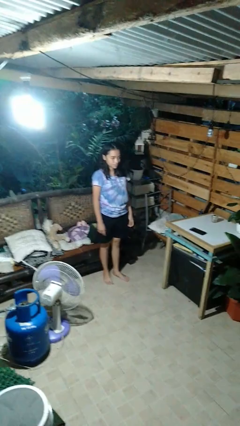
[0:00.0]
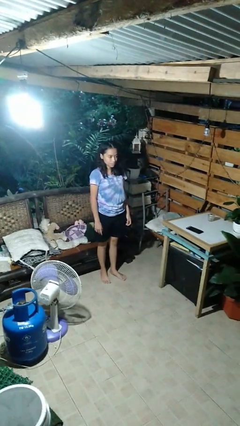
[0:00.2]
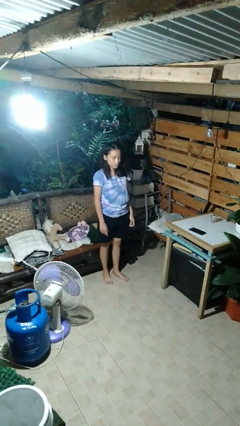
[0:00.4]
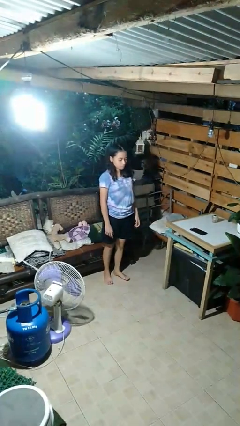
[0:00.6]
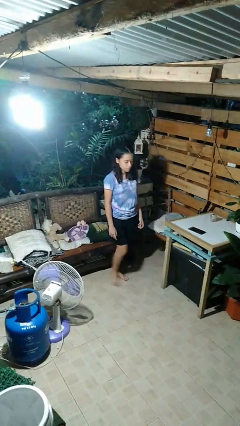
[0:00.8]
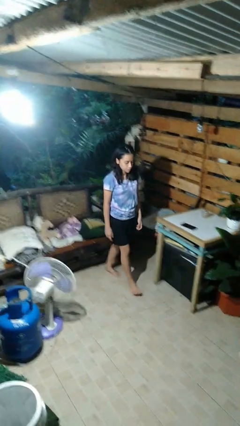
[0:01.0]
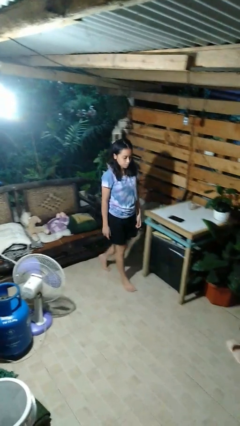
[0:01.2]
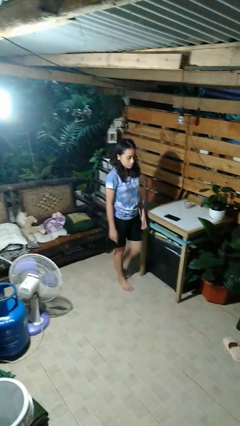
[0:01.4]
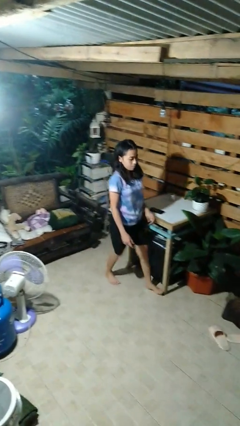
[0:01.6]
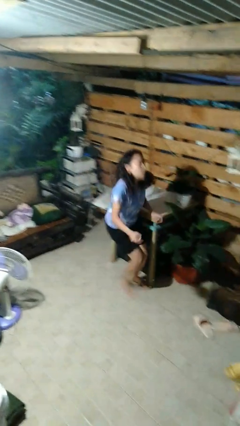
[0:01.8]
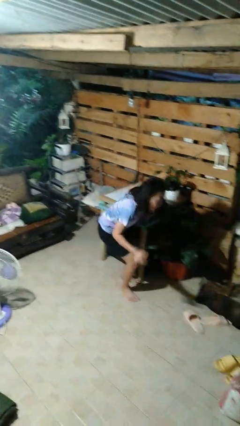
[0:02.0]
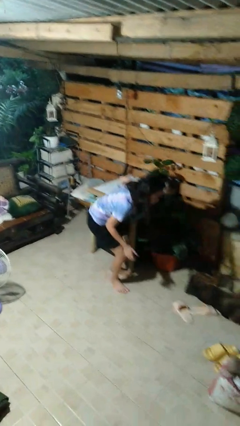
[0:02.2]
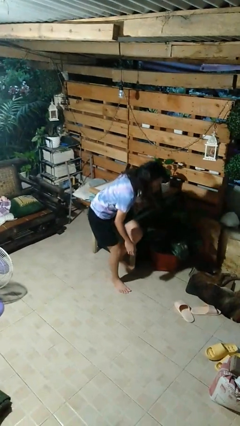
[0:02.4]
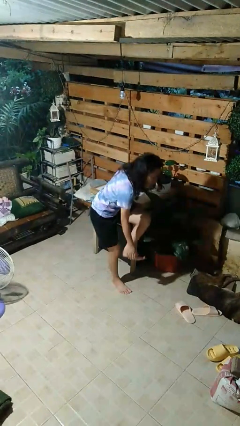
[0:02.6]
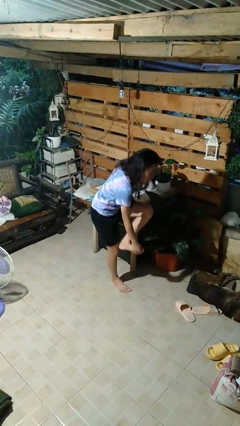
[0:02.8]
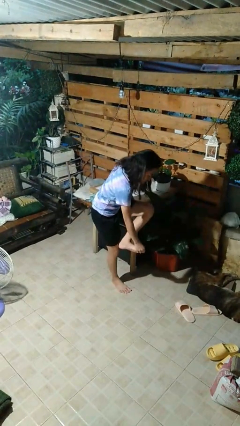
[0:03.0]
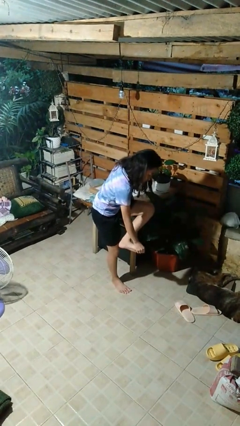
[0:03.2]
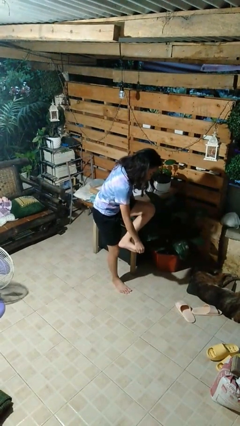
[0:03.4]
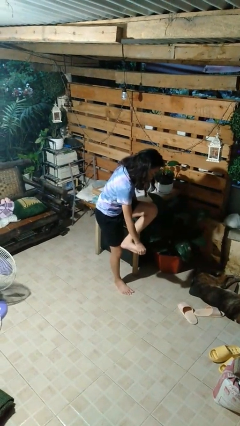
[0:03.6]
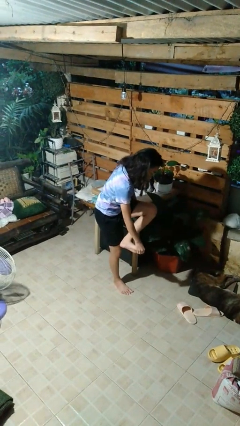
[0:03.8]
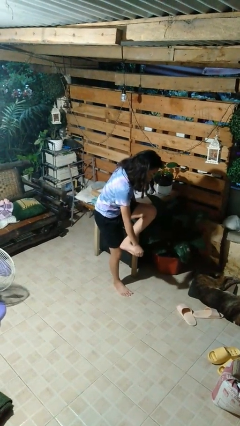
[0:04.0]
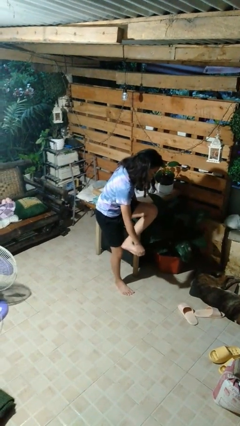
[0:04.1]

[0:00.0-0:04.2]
person stubs toe

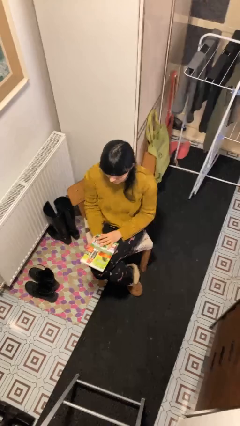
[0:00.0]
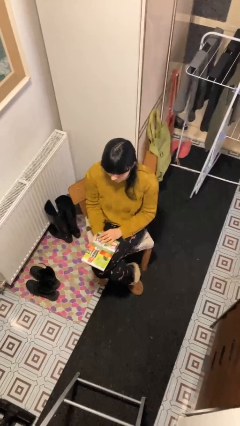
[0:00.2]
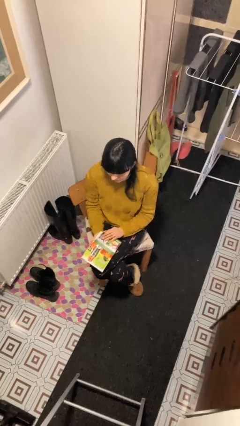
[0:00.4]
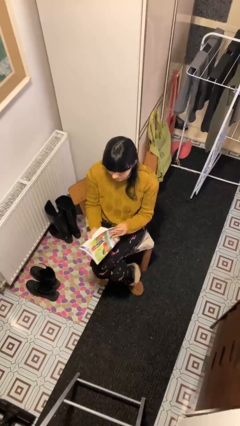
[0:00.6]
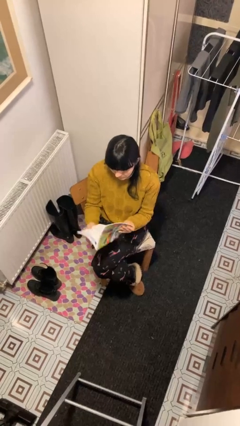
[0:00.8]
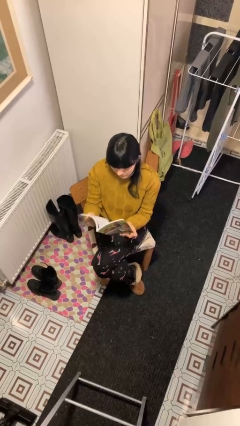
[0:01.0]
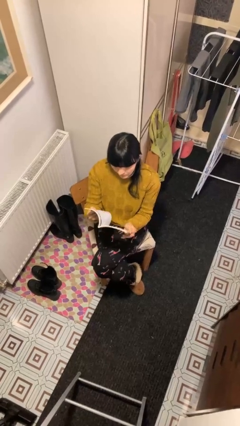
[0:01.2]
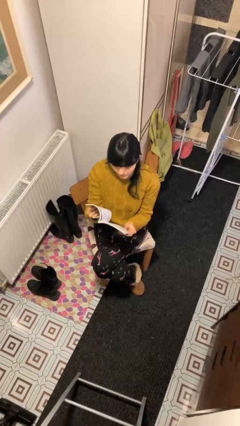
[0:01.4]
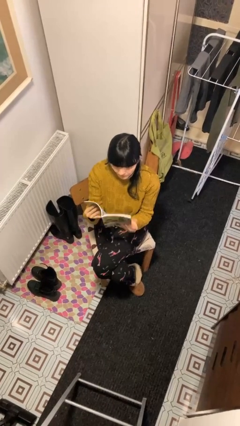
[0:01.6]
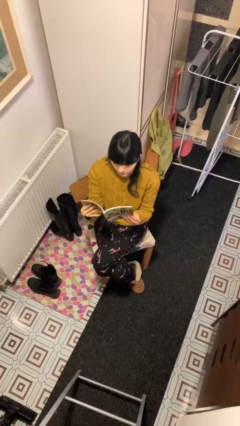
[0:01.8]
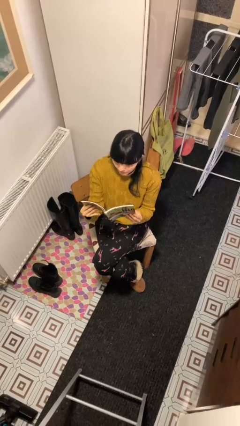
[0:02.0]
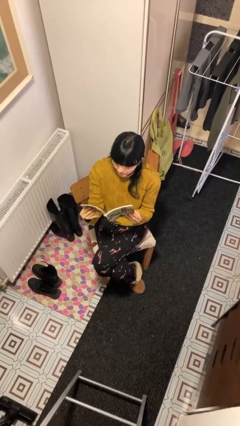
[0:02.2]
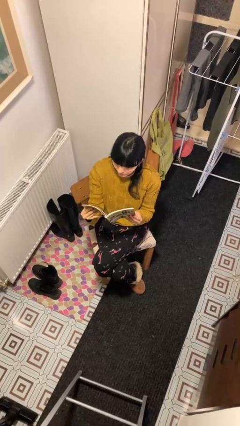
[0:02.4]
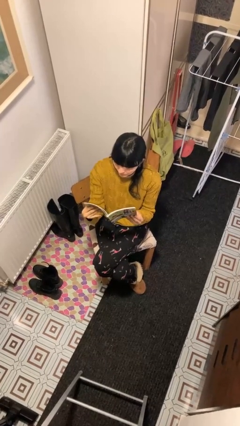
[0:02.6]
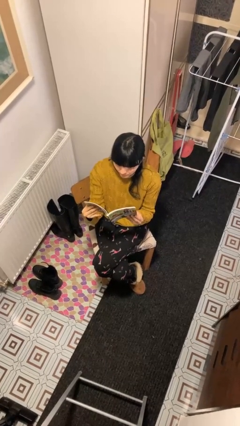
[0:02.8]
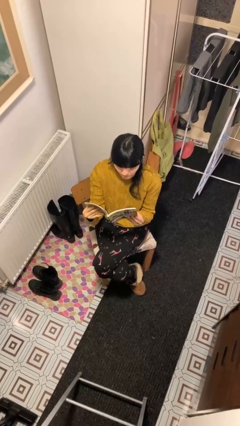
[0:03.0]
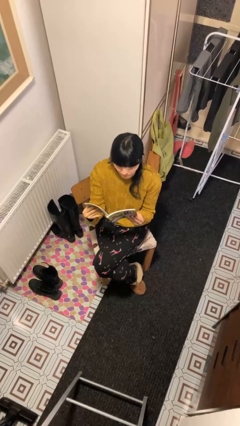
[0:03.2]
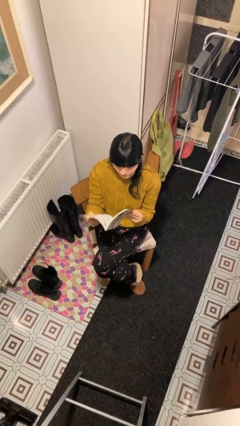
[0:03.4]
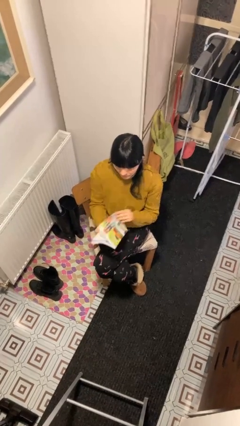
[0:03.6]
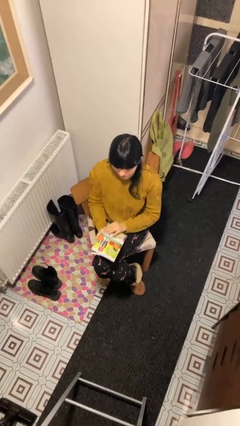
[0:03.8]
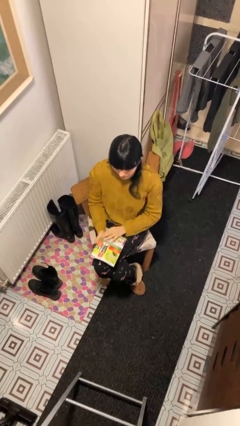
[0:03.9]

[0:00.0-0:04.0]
person reads document

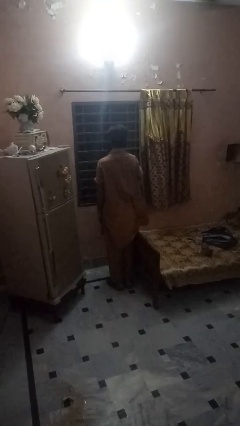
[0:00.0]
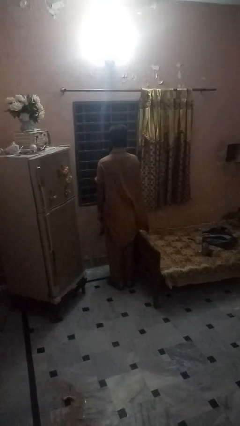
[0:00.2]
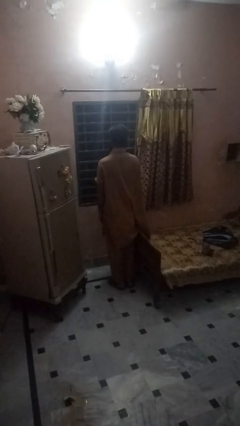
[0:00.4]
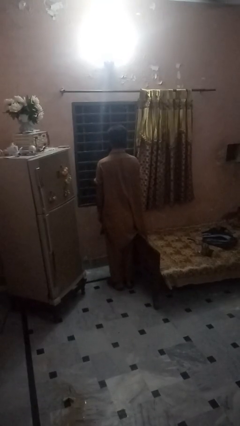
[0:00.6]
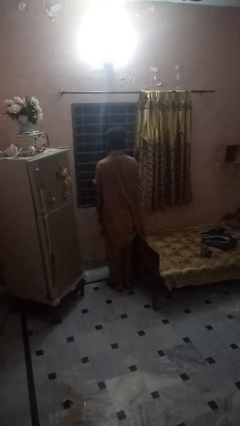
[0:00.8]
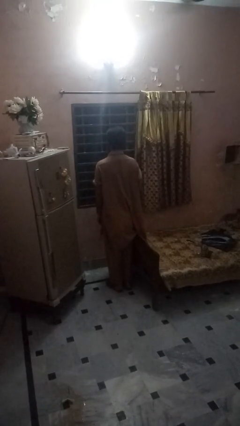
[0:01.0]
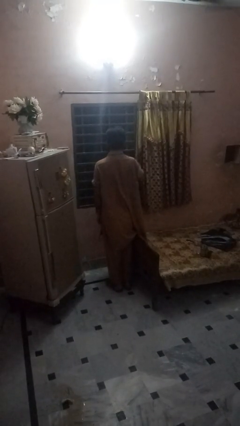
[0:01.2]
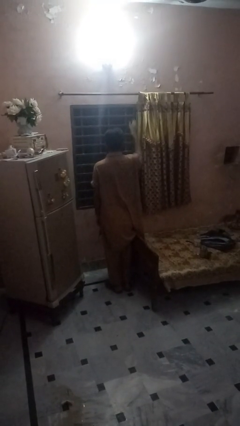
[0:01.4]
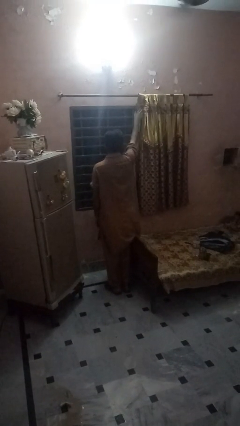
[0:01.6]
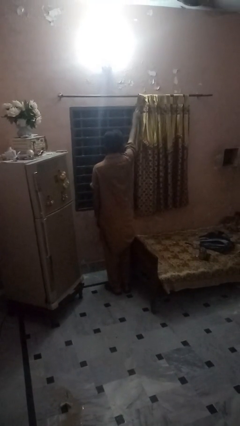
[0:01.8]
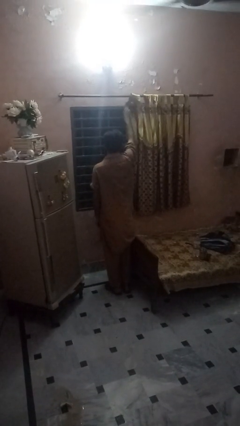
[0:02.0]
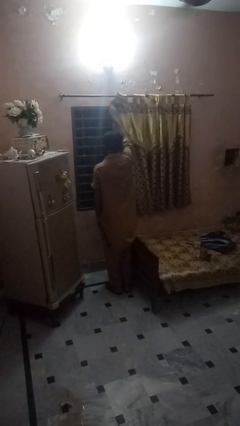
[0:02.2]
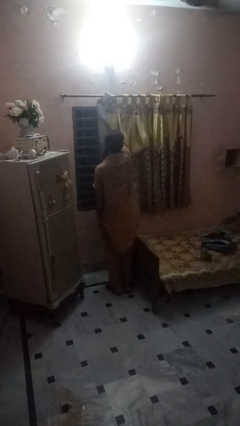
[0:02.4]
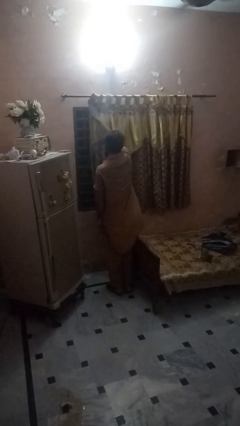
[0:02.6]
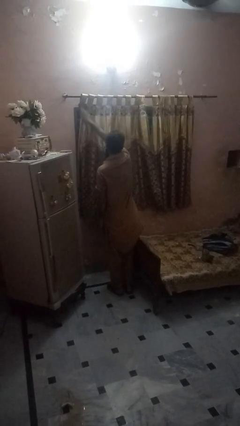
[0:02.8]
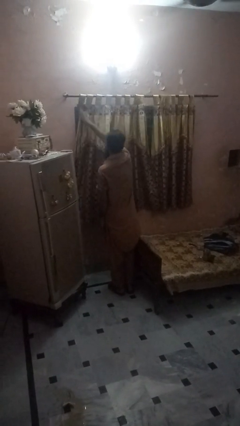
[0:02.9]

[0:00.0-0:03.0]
person closes curtains

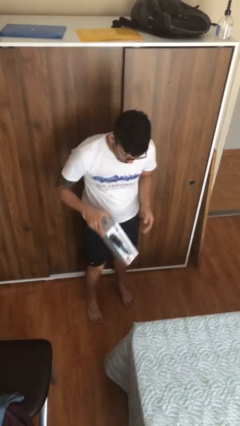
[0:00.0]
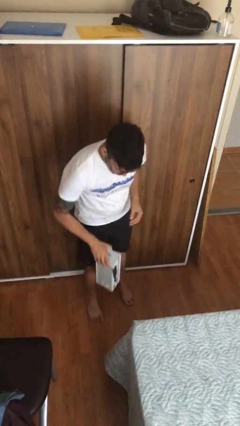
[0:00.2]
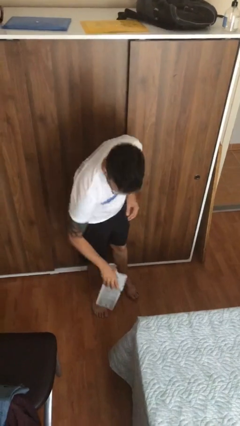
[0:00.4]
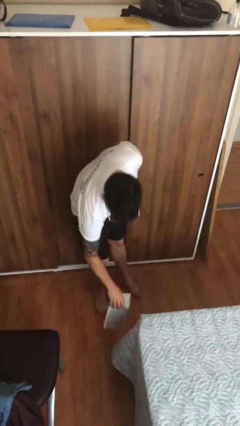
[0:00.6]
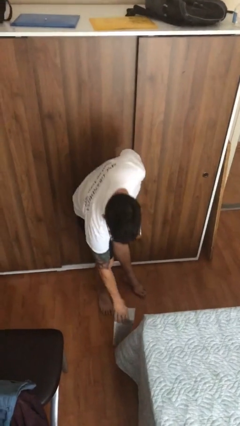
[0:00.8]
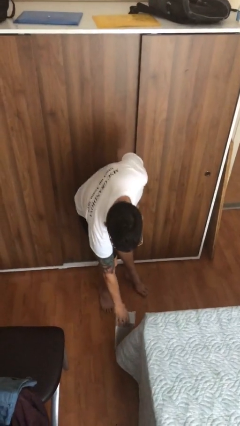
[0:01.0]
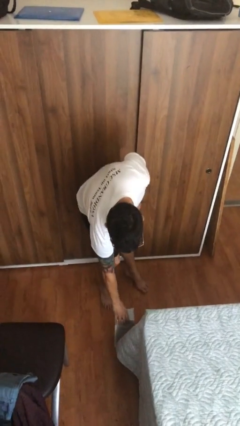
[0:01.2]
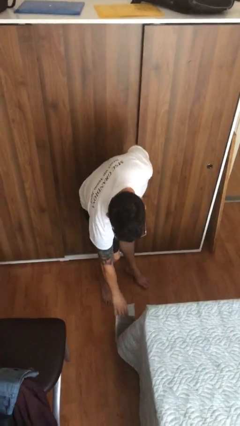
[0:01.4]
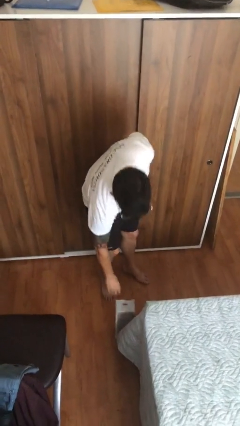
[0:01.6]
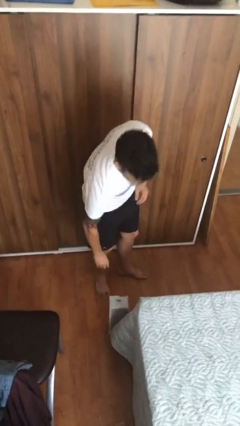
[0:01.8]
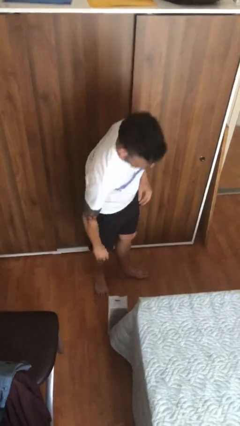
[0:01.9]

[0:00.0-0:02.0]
person puts down object on floor

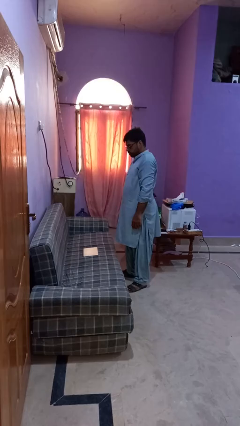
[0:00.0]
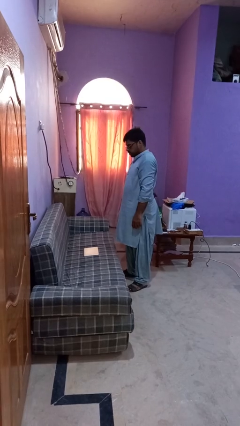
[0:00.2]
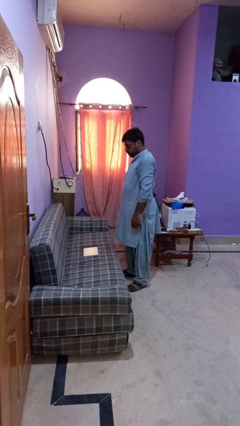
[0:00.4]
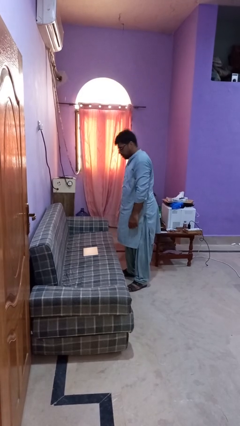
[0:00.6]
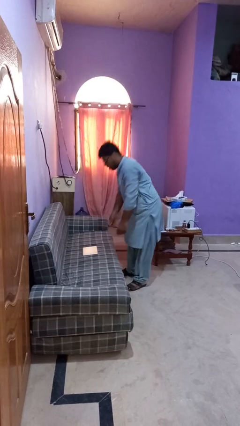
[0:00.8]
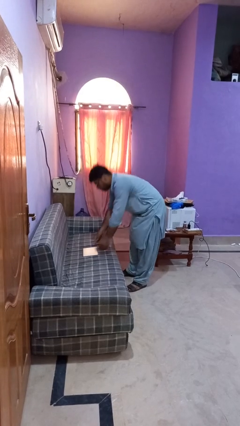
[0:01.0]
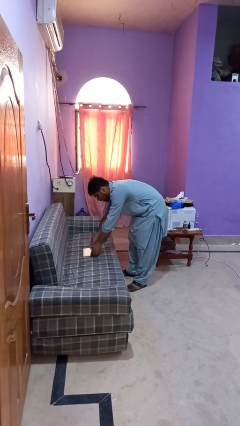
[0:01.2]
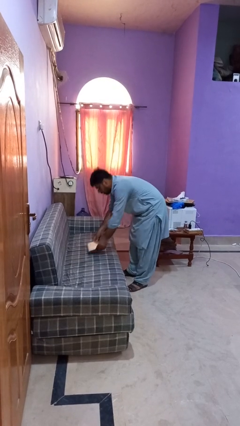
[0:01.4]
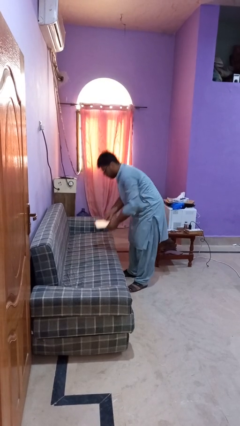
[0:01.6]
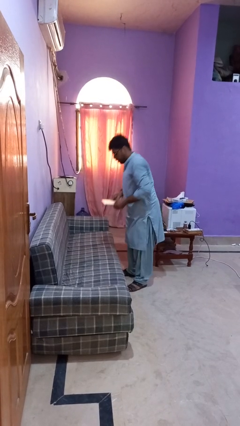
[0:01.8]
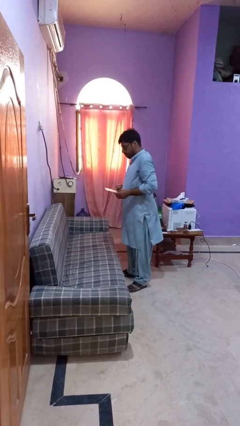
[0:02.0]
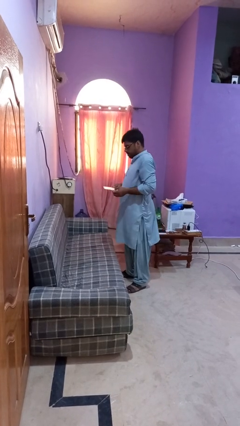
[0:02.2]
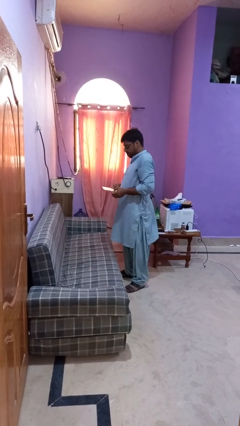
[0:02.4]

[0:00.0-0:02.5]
person picks up object from couch

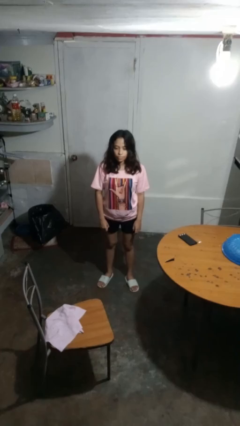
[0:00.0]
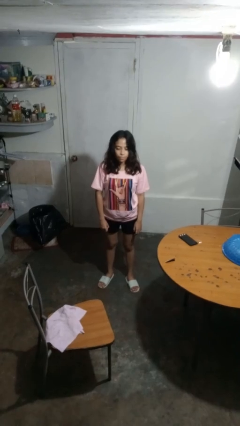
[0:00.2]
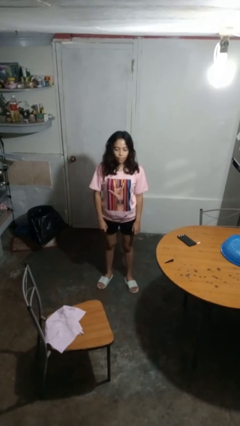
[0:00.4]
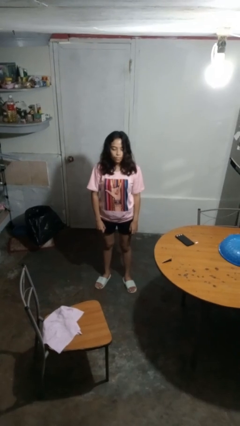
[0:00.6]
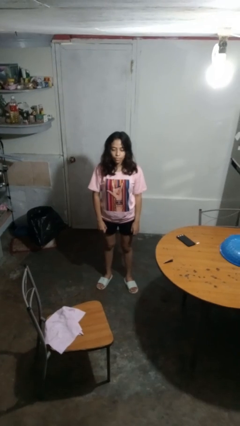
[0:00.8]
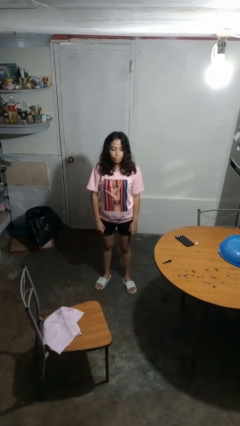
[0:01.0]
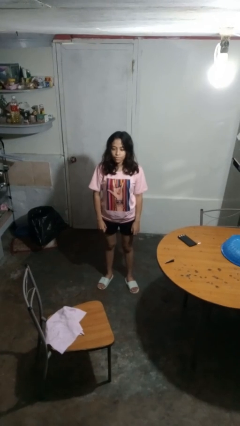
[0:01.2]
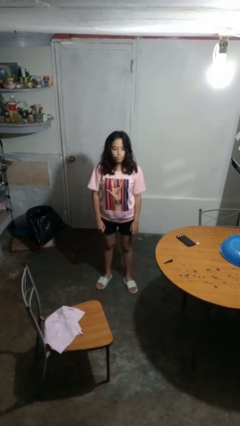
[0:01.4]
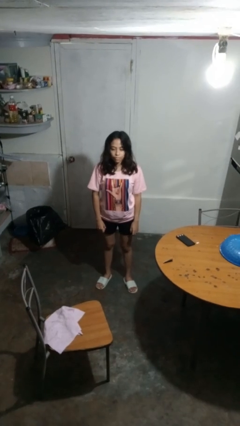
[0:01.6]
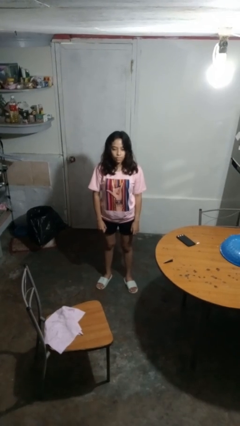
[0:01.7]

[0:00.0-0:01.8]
person shakes head
